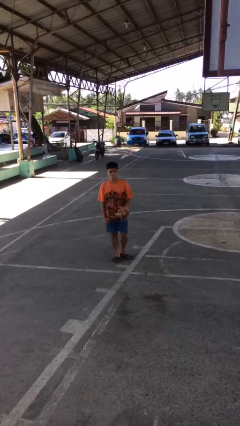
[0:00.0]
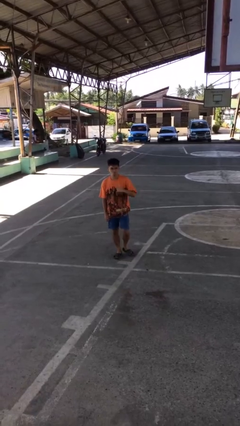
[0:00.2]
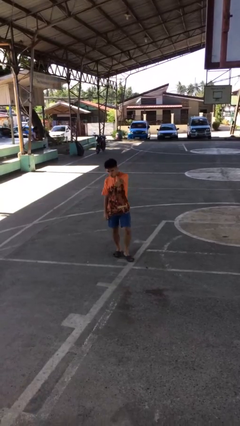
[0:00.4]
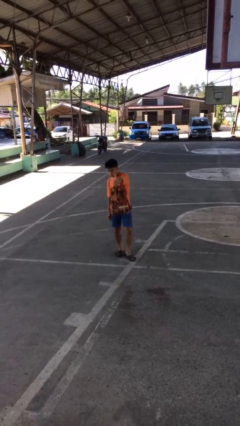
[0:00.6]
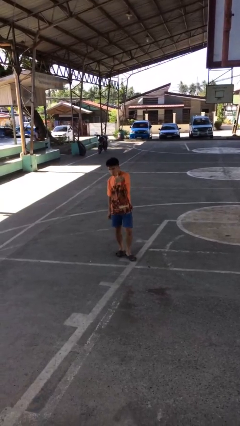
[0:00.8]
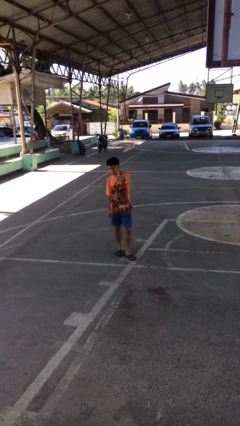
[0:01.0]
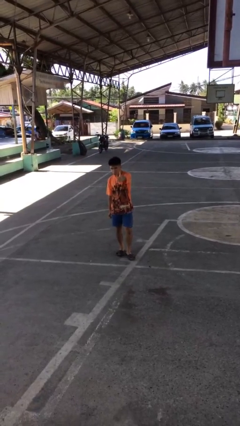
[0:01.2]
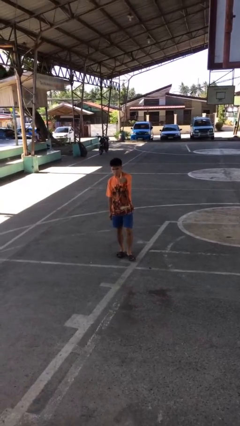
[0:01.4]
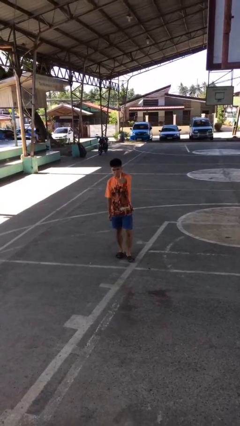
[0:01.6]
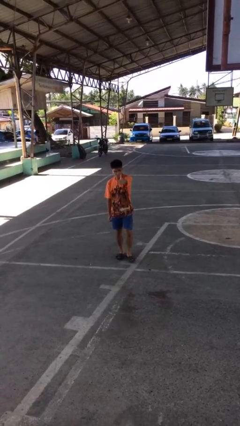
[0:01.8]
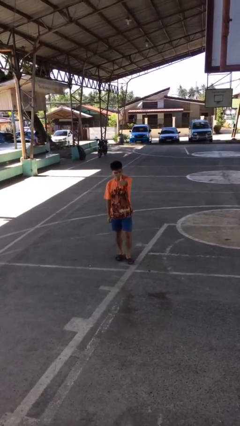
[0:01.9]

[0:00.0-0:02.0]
person gestures thumbs up

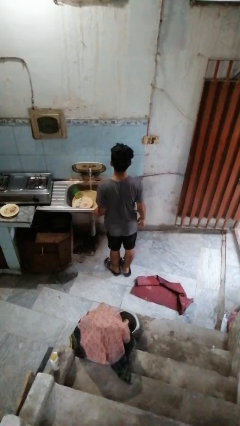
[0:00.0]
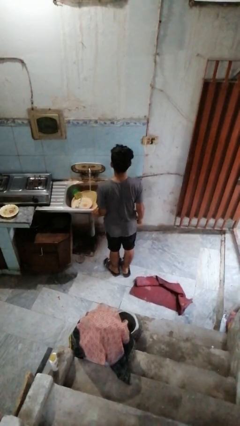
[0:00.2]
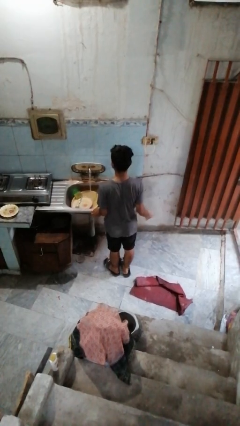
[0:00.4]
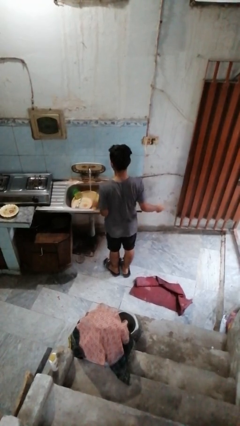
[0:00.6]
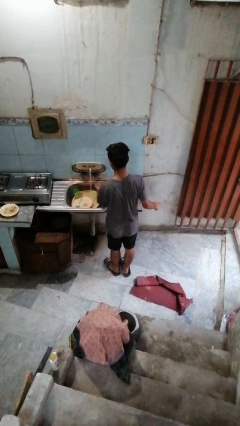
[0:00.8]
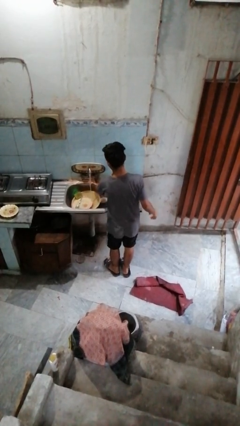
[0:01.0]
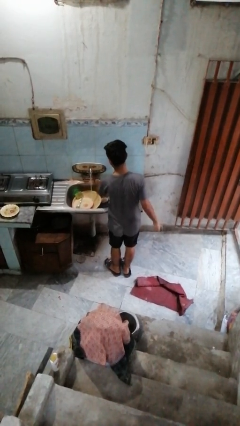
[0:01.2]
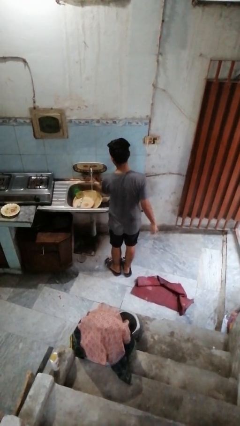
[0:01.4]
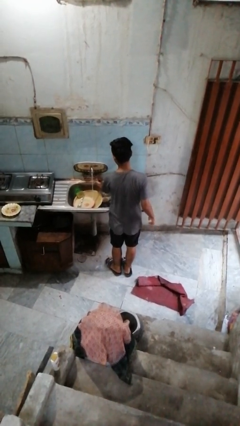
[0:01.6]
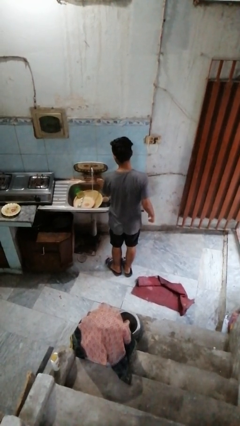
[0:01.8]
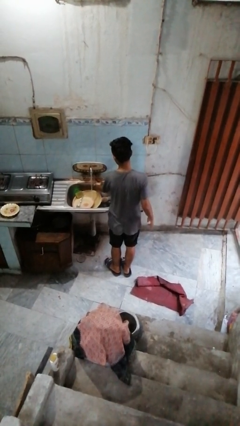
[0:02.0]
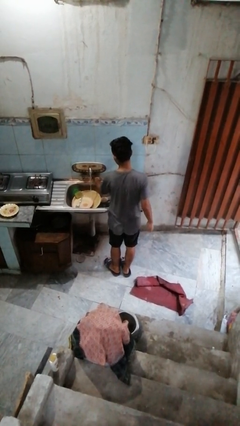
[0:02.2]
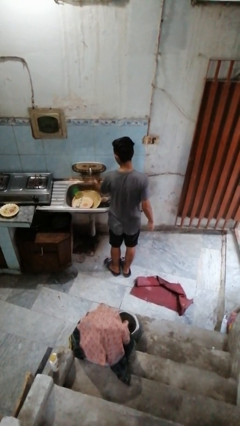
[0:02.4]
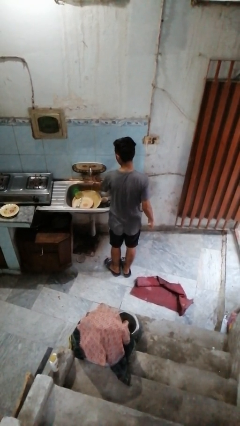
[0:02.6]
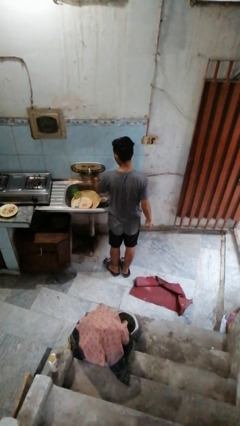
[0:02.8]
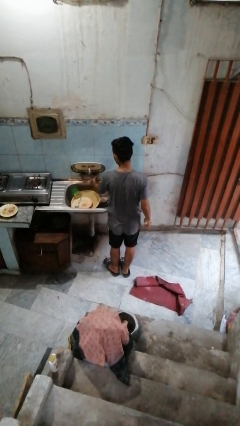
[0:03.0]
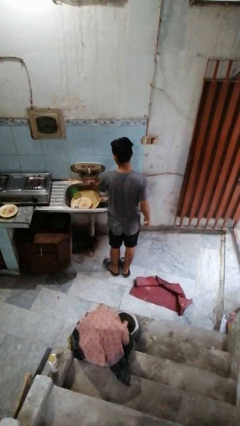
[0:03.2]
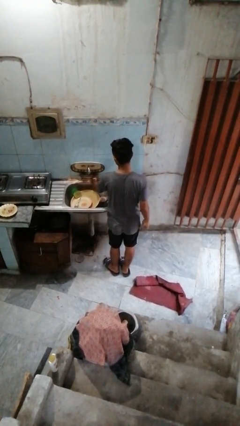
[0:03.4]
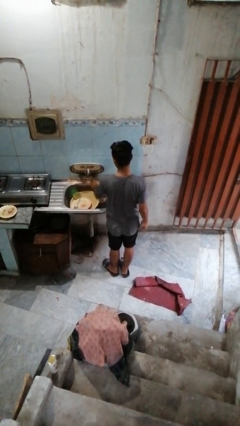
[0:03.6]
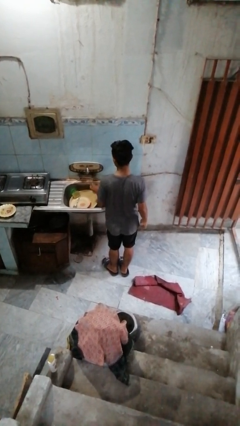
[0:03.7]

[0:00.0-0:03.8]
person turns off faucet

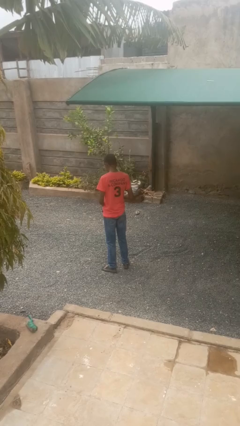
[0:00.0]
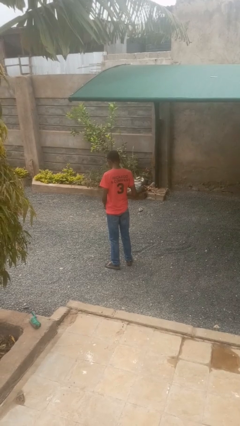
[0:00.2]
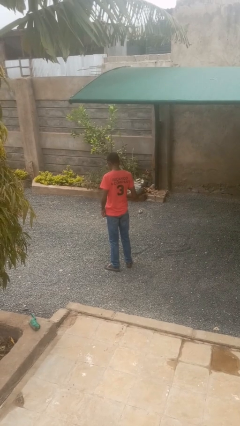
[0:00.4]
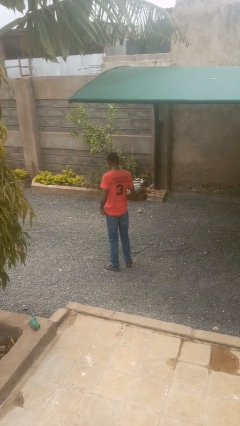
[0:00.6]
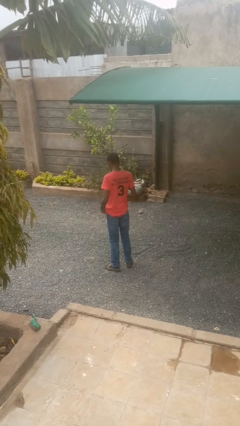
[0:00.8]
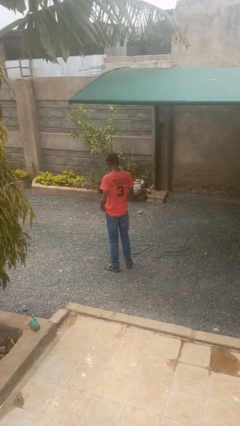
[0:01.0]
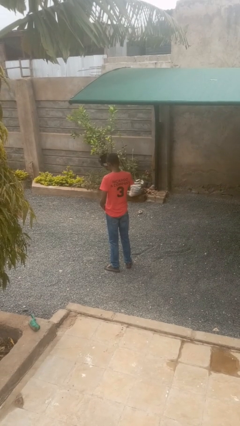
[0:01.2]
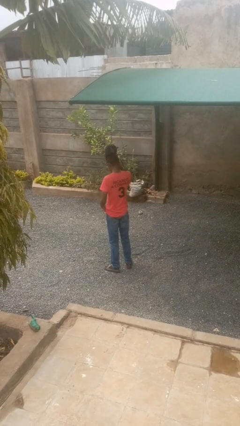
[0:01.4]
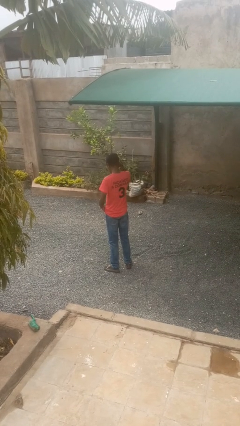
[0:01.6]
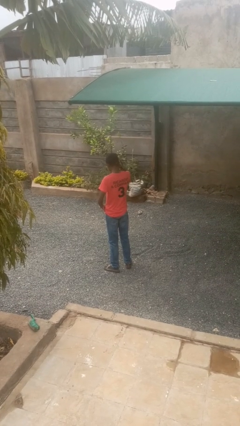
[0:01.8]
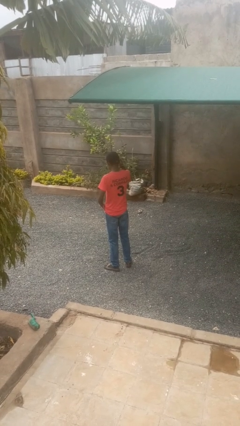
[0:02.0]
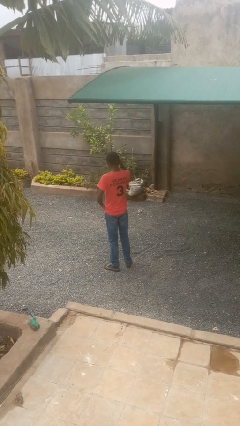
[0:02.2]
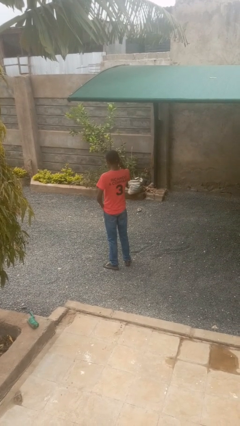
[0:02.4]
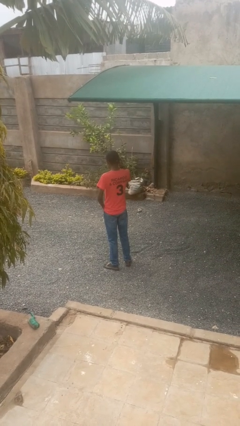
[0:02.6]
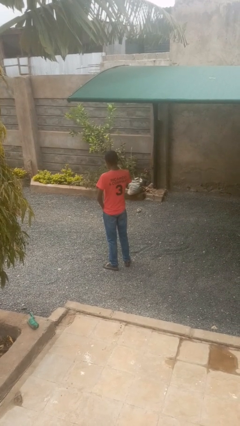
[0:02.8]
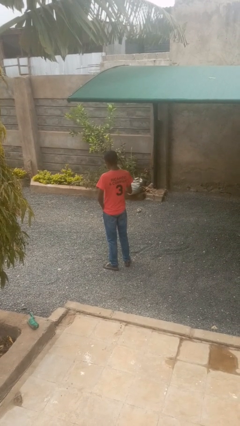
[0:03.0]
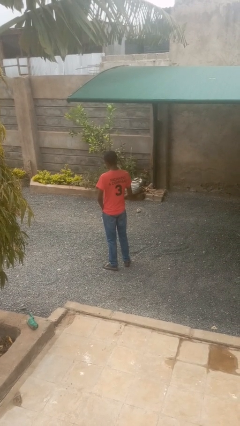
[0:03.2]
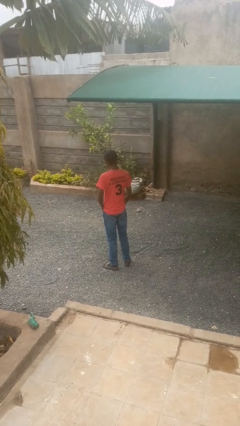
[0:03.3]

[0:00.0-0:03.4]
person puts on hat

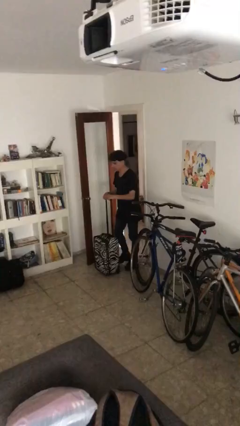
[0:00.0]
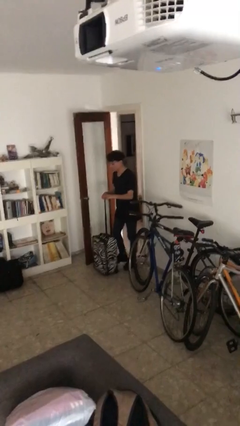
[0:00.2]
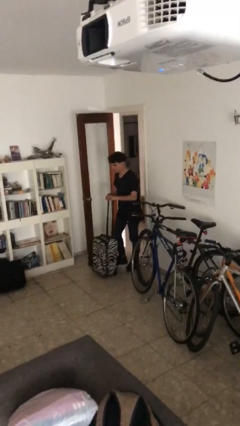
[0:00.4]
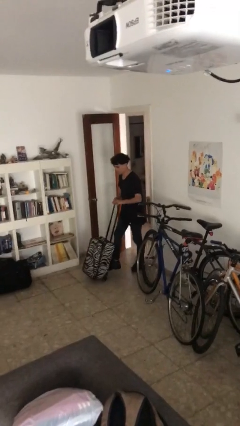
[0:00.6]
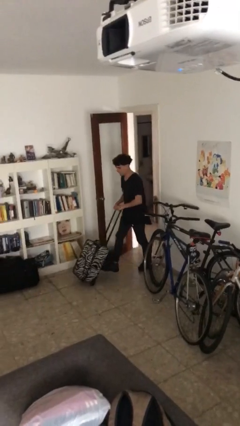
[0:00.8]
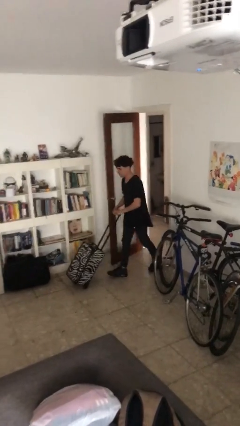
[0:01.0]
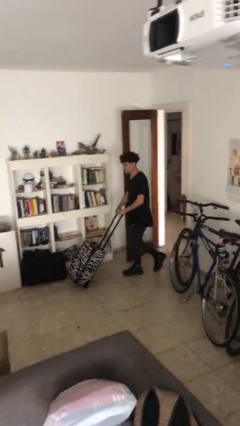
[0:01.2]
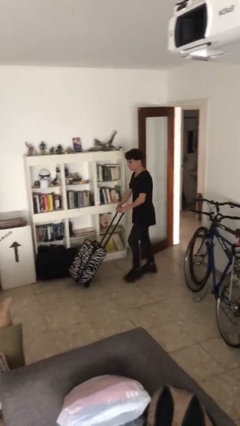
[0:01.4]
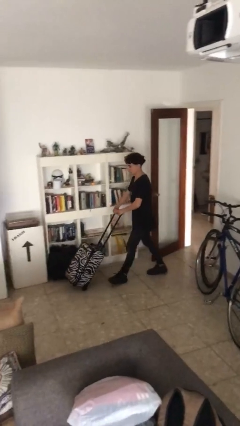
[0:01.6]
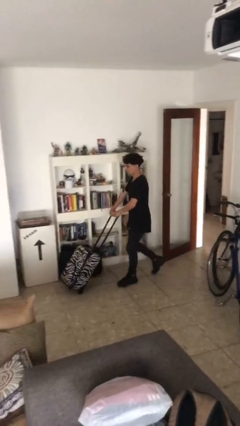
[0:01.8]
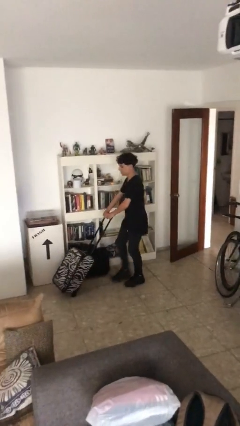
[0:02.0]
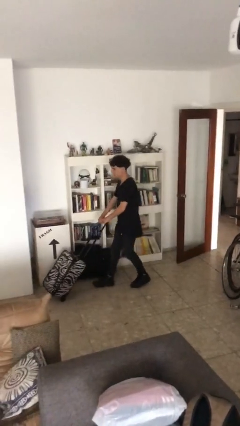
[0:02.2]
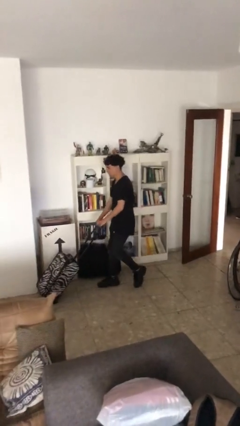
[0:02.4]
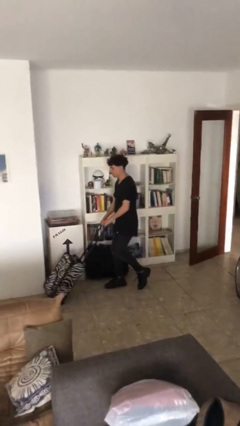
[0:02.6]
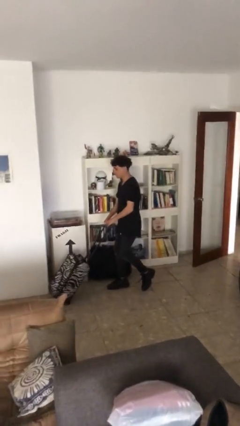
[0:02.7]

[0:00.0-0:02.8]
person pushes wheeled cart

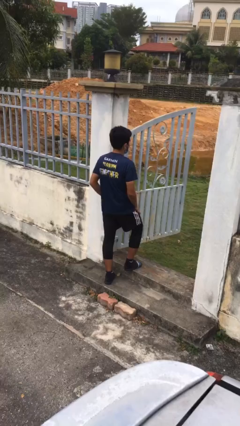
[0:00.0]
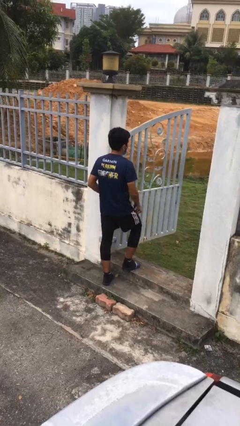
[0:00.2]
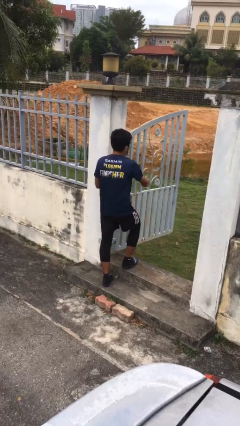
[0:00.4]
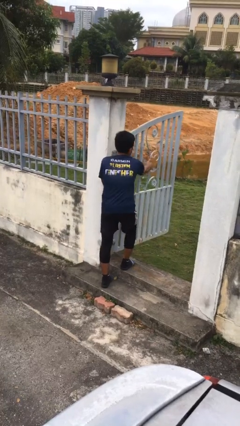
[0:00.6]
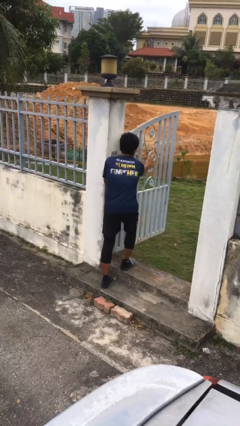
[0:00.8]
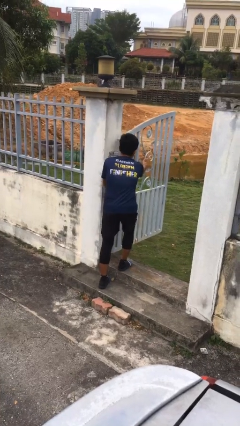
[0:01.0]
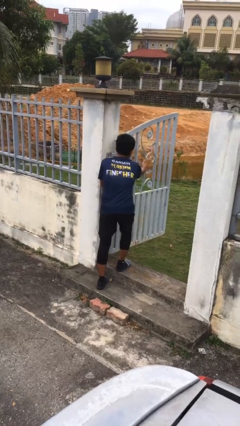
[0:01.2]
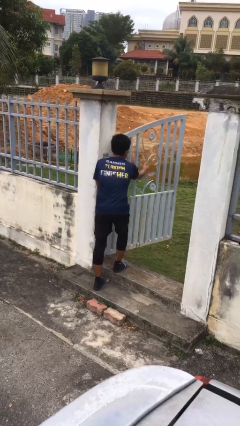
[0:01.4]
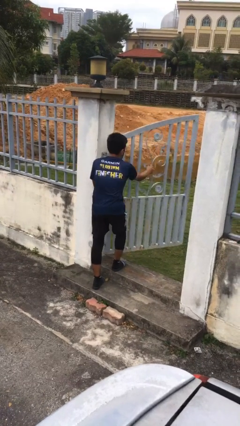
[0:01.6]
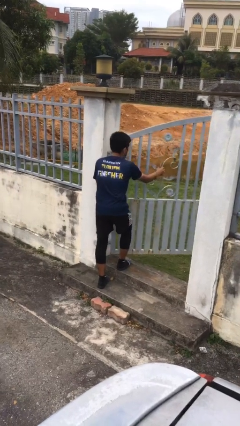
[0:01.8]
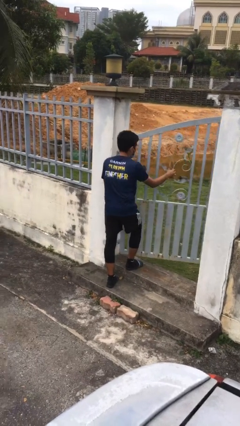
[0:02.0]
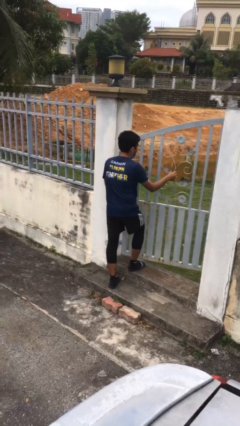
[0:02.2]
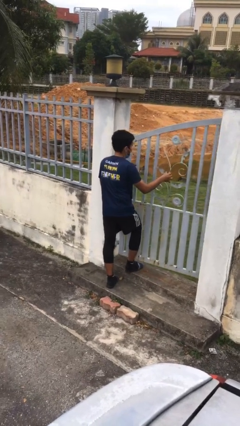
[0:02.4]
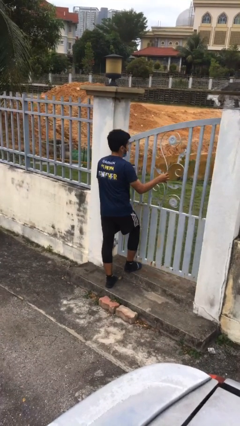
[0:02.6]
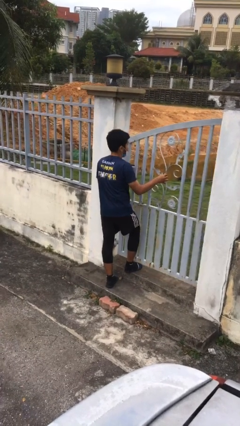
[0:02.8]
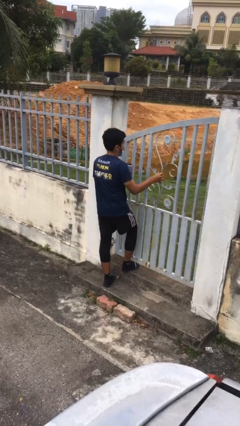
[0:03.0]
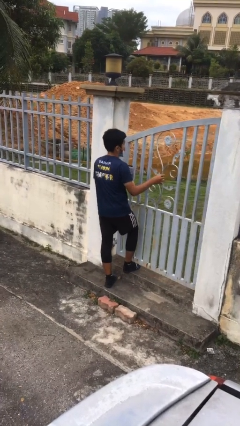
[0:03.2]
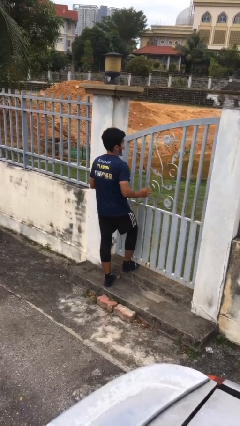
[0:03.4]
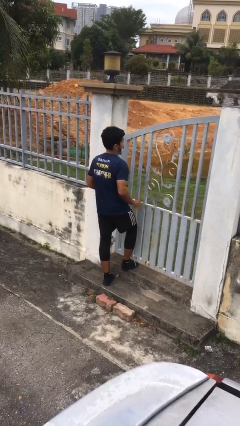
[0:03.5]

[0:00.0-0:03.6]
person closes facility door

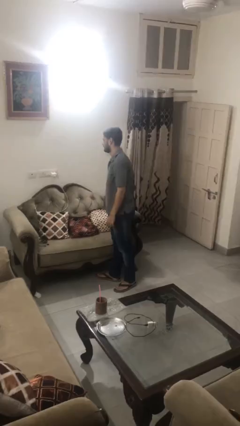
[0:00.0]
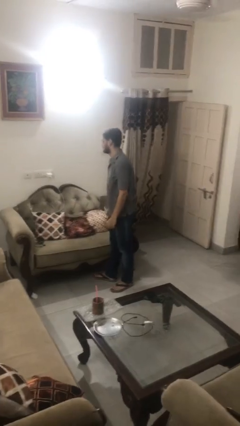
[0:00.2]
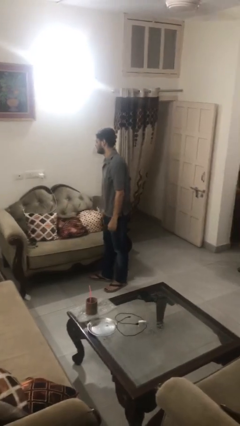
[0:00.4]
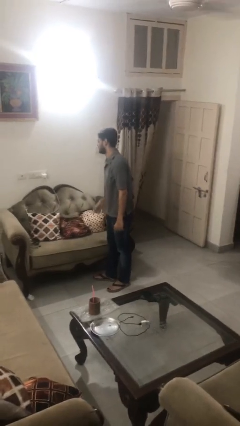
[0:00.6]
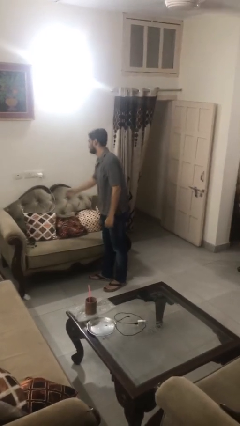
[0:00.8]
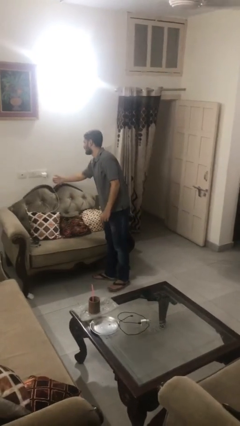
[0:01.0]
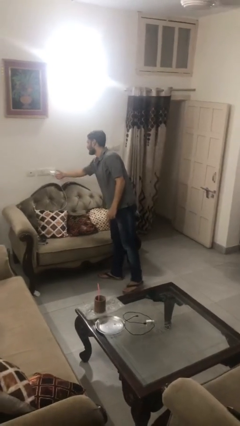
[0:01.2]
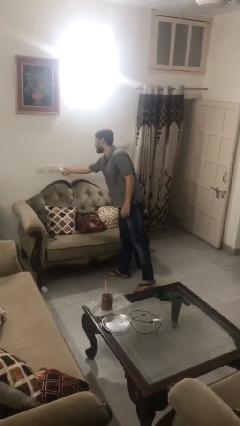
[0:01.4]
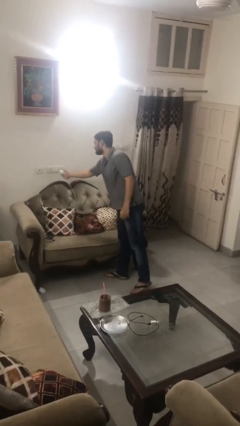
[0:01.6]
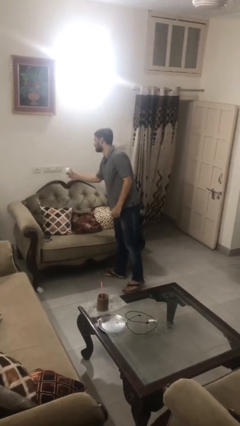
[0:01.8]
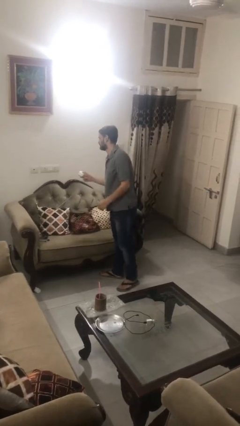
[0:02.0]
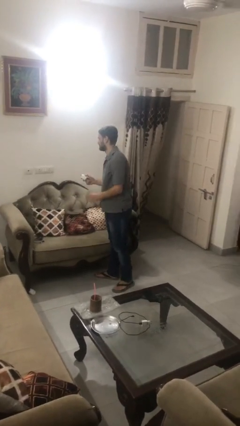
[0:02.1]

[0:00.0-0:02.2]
person unplugs from electrical socket
